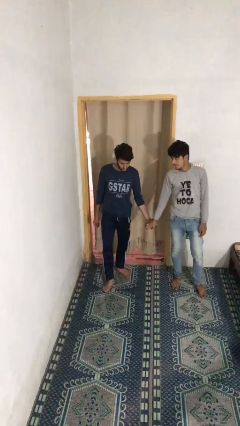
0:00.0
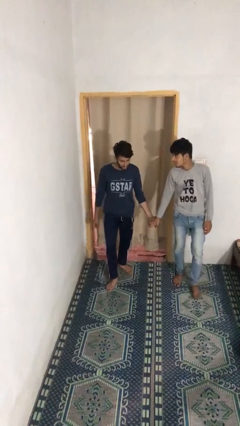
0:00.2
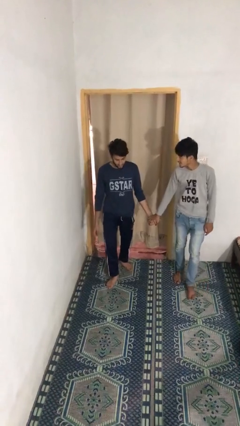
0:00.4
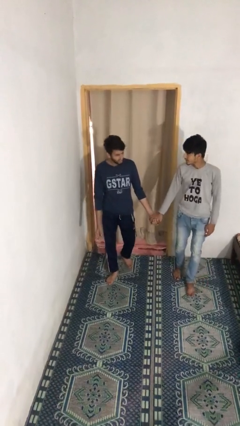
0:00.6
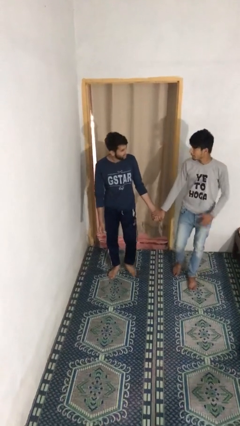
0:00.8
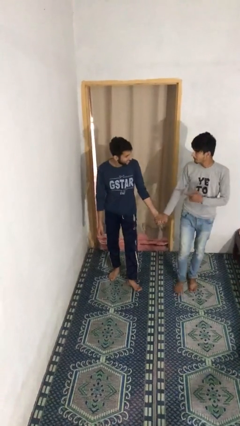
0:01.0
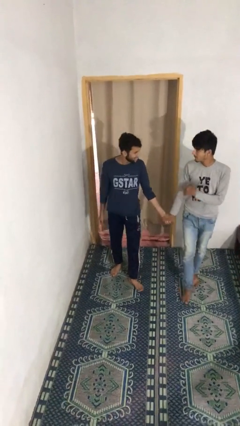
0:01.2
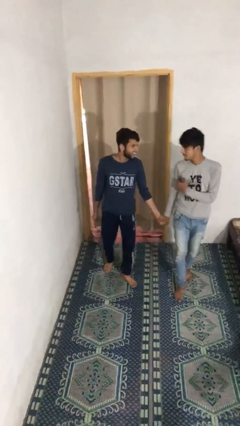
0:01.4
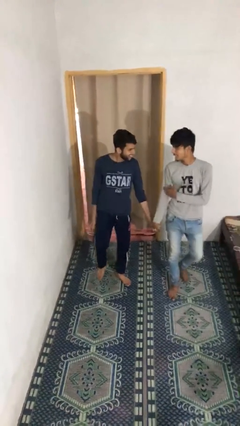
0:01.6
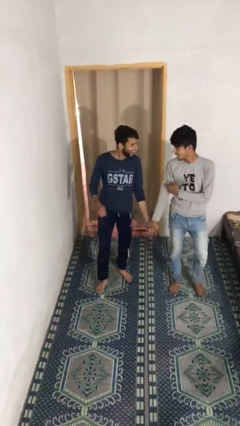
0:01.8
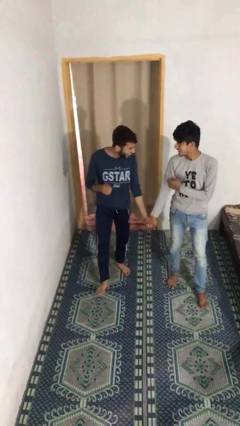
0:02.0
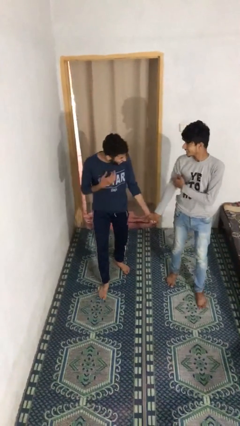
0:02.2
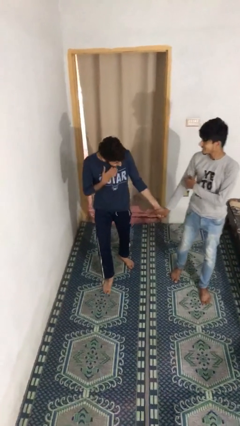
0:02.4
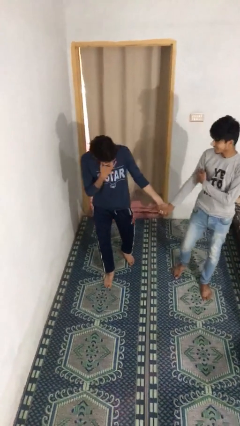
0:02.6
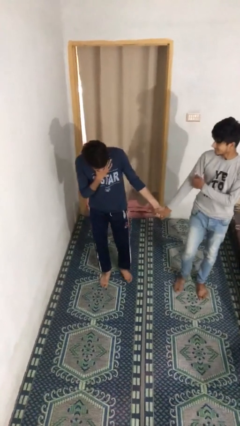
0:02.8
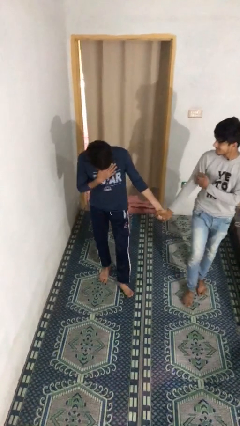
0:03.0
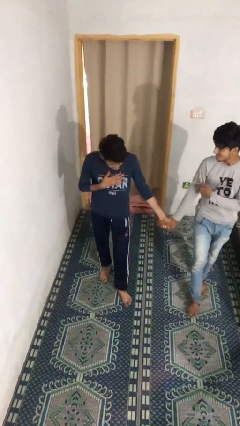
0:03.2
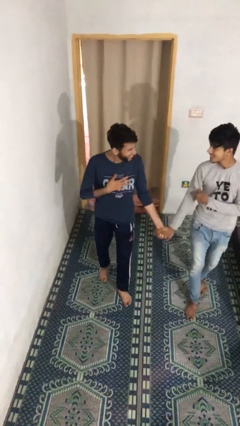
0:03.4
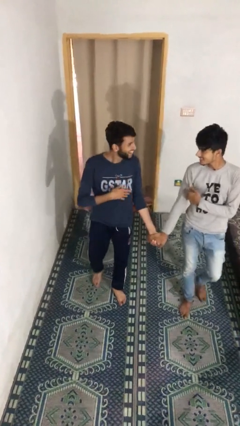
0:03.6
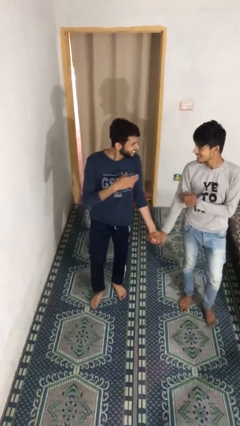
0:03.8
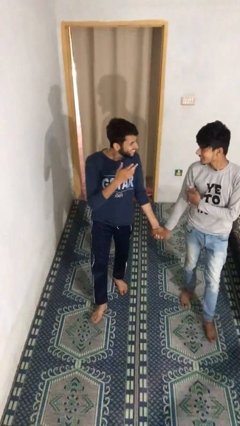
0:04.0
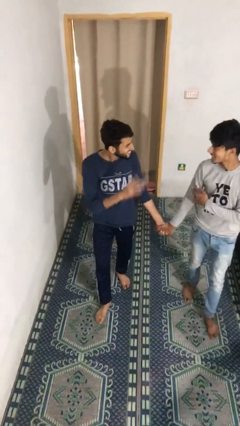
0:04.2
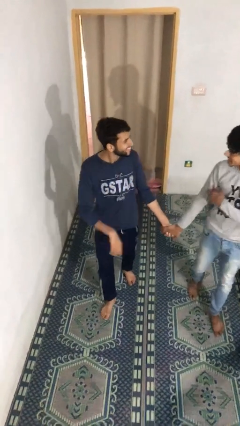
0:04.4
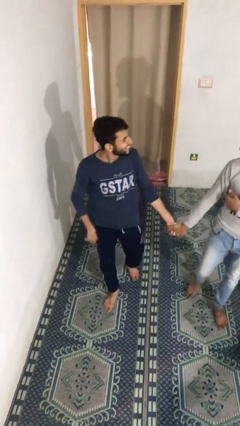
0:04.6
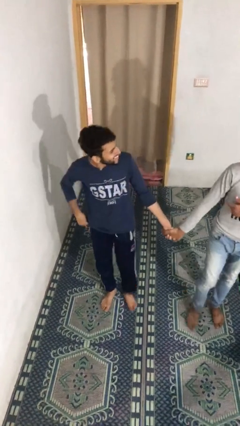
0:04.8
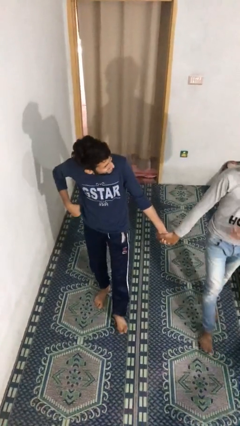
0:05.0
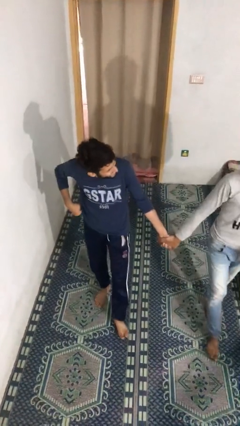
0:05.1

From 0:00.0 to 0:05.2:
person holds hand

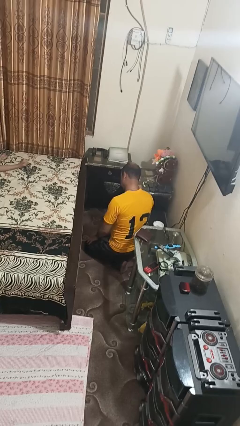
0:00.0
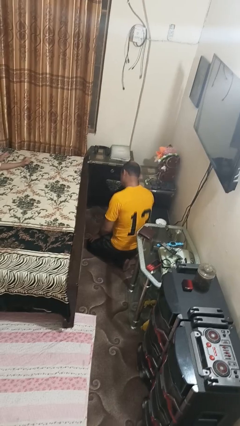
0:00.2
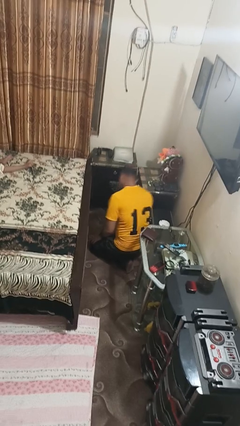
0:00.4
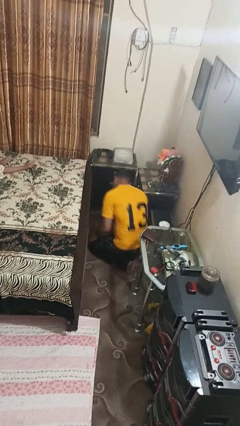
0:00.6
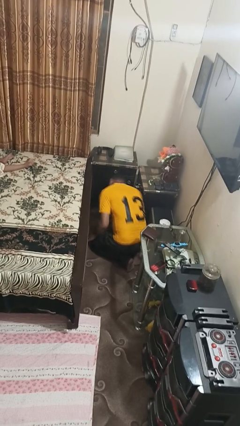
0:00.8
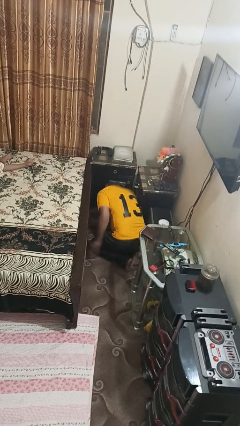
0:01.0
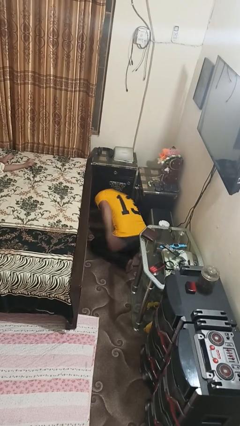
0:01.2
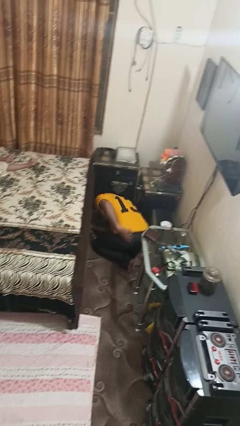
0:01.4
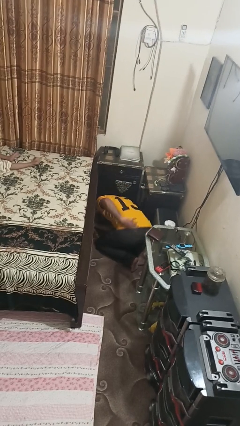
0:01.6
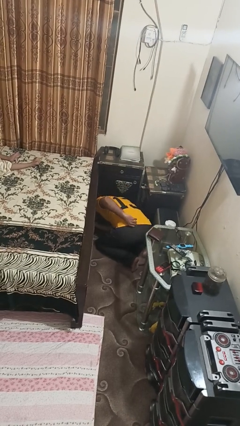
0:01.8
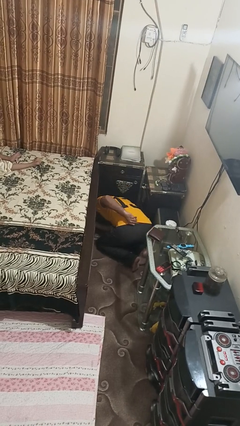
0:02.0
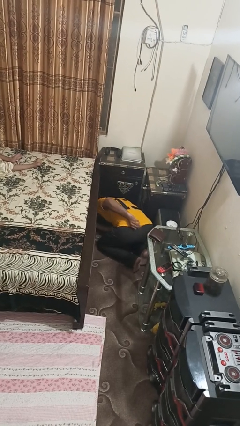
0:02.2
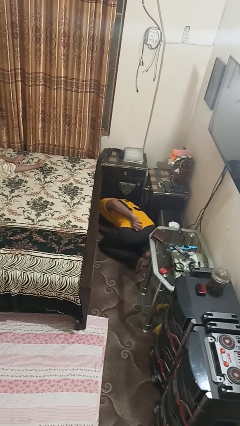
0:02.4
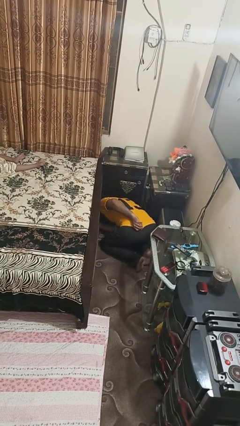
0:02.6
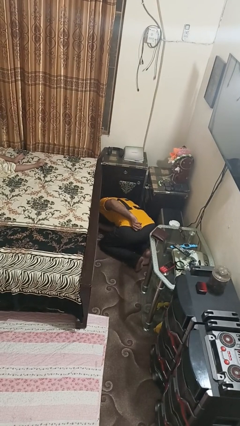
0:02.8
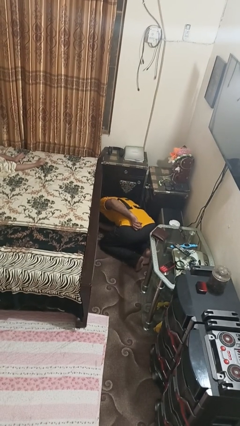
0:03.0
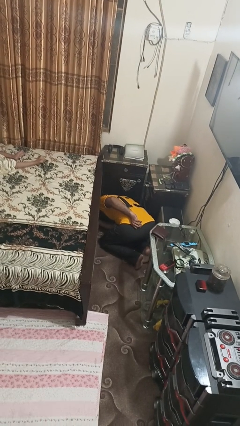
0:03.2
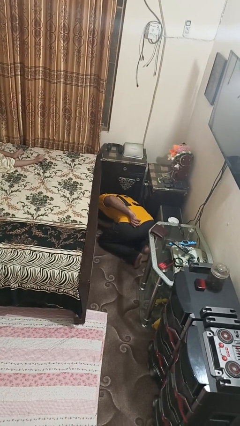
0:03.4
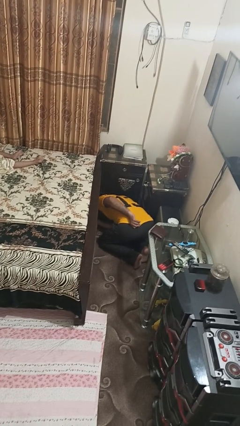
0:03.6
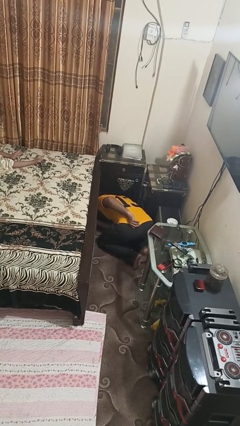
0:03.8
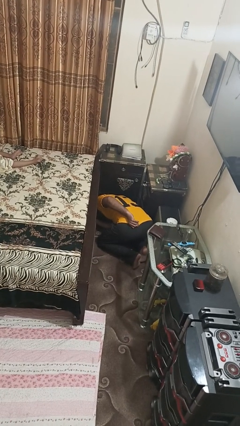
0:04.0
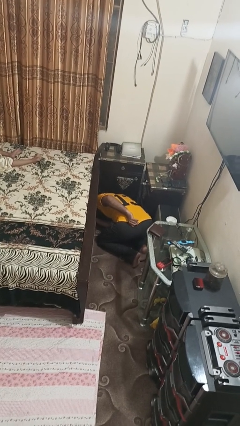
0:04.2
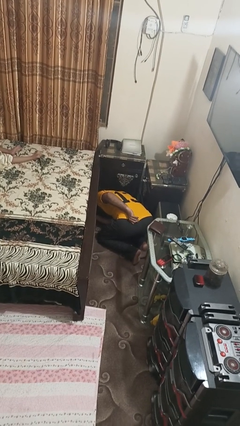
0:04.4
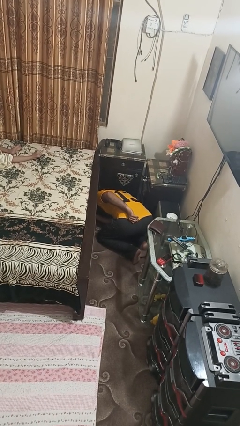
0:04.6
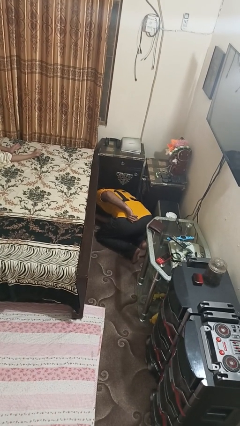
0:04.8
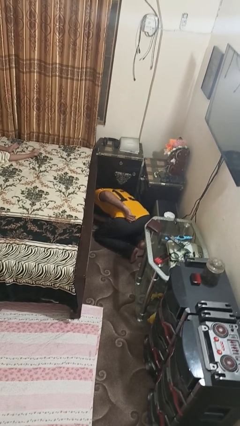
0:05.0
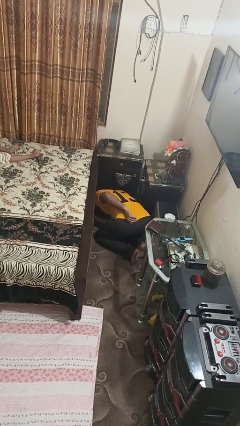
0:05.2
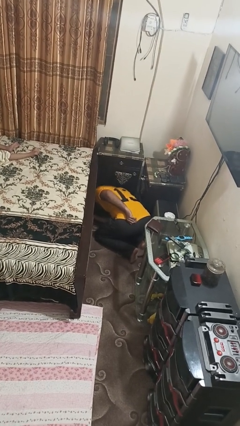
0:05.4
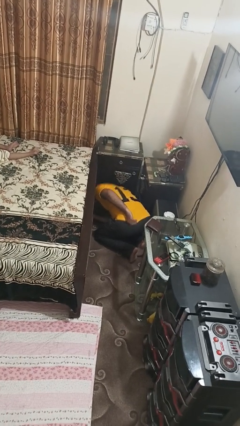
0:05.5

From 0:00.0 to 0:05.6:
person searches under bed

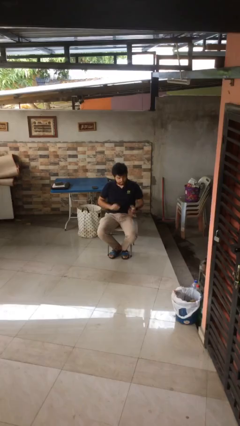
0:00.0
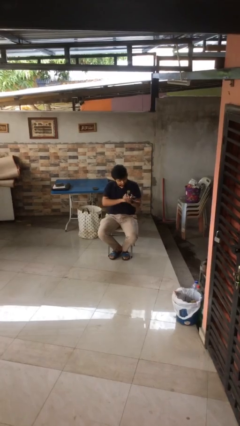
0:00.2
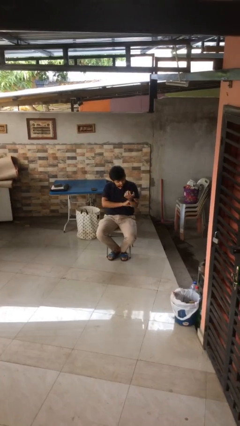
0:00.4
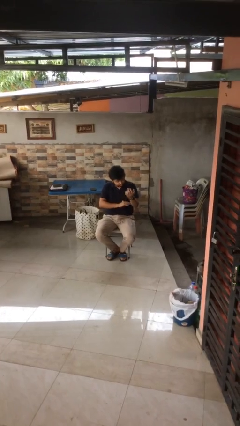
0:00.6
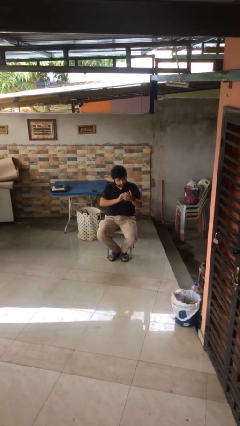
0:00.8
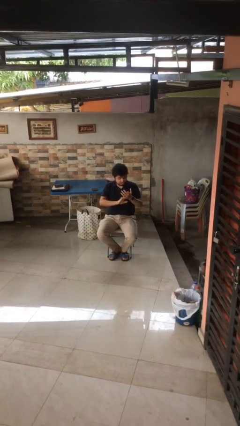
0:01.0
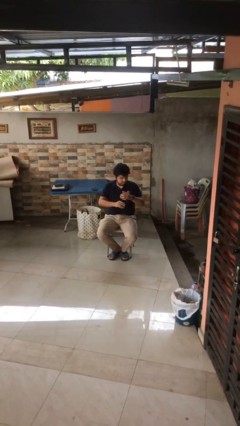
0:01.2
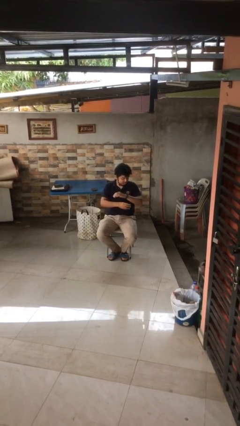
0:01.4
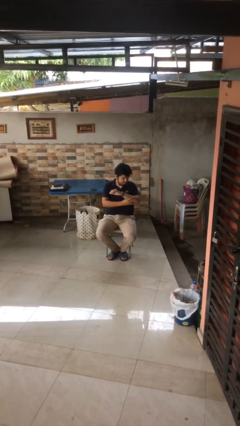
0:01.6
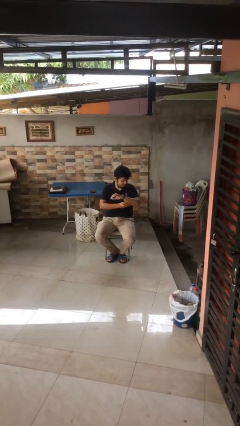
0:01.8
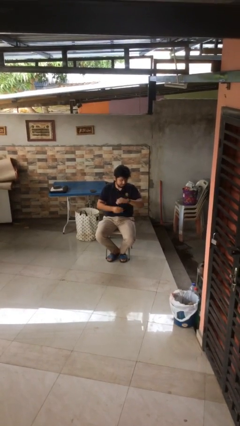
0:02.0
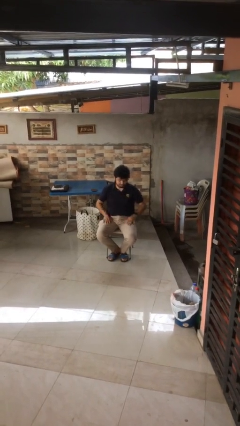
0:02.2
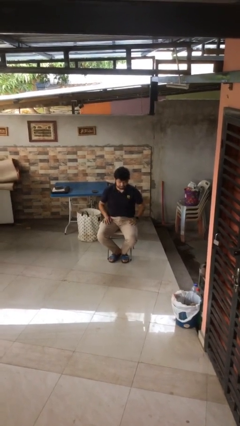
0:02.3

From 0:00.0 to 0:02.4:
person looks at hands in lap

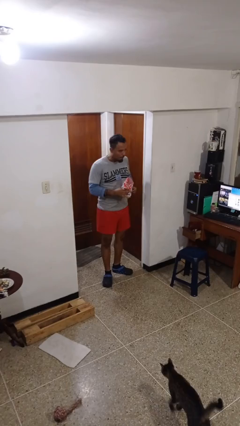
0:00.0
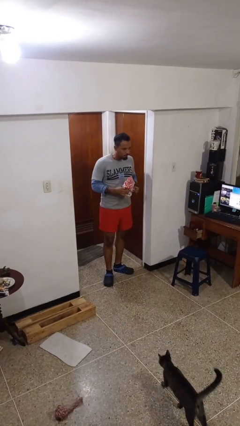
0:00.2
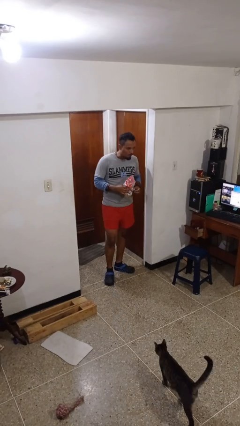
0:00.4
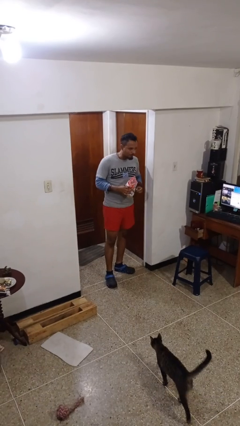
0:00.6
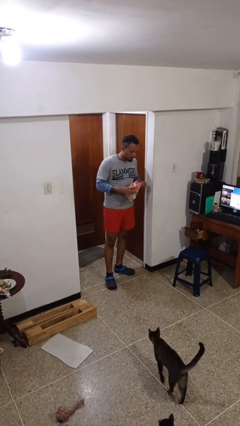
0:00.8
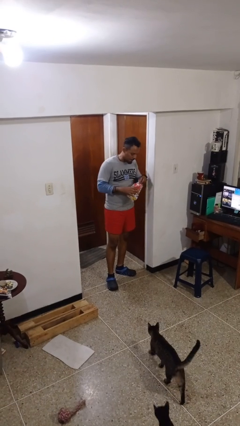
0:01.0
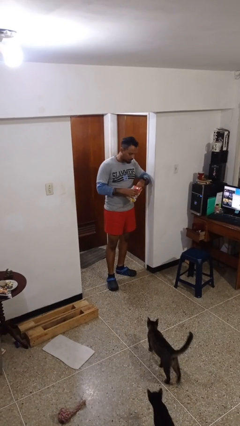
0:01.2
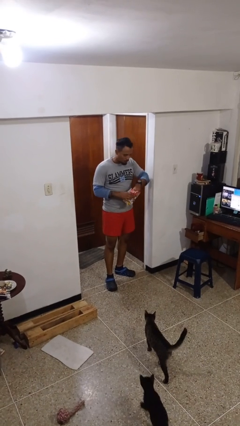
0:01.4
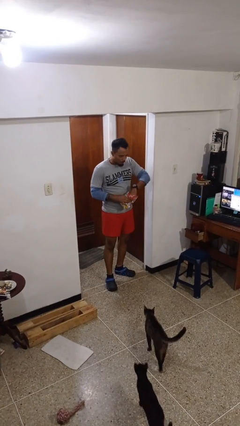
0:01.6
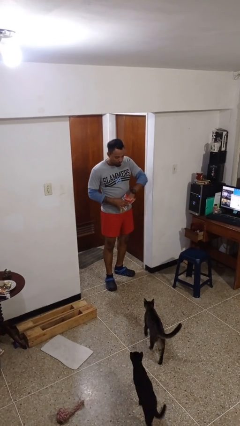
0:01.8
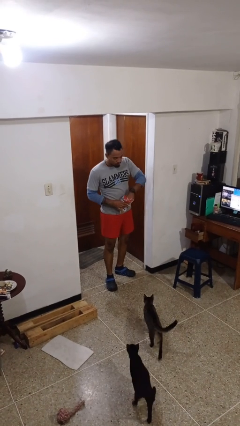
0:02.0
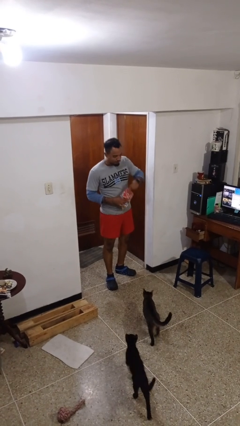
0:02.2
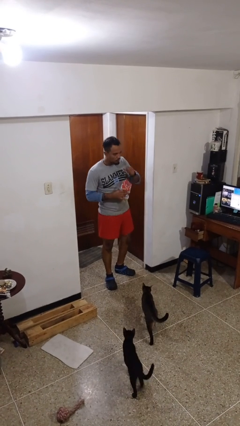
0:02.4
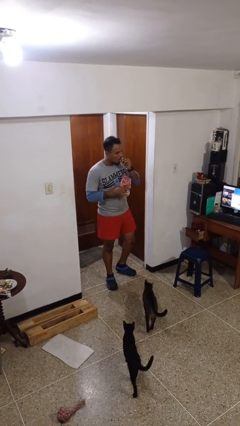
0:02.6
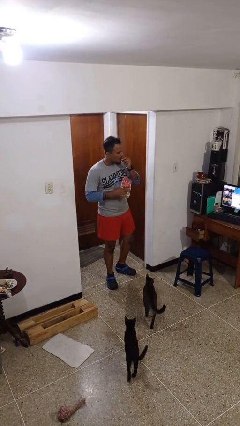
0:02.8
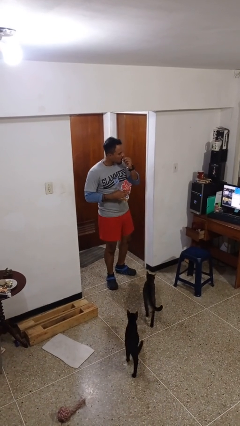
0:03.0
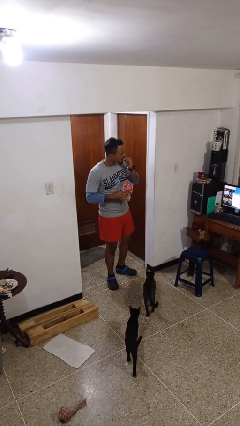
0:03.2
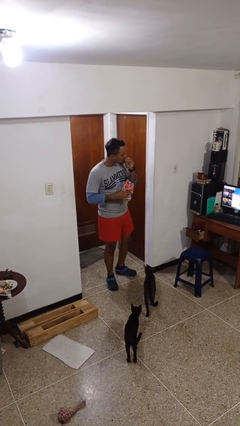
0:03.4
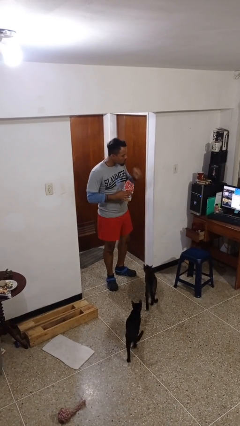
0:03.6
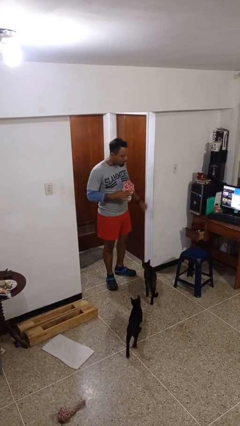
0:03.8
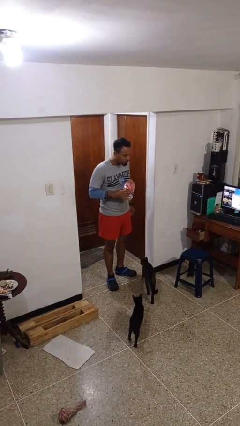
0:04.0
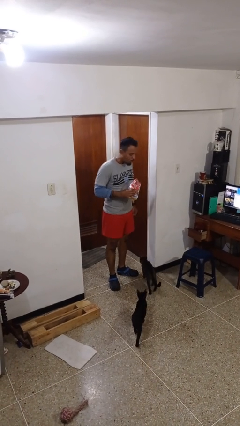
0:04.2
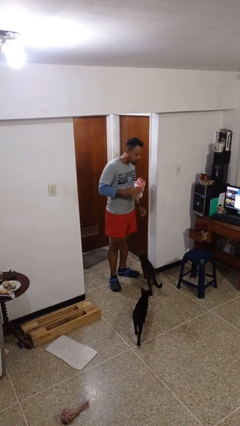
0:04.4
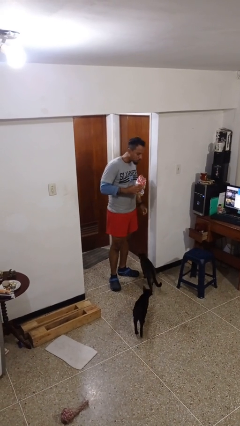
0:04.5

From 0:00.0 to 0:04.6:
person eats snack from bag
